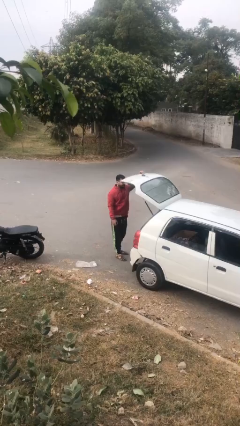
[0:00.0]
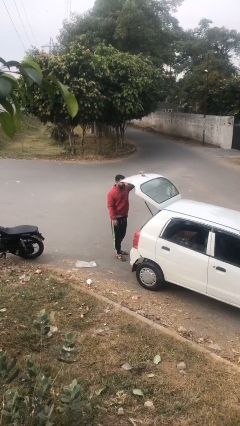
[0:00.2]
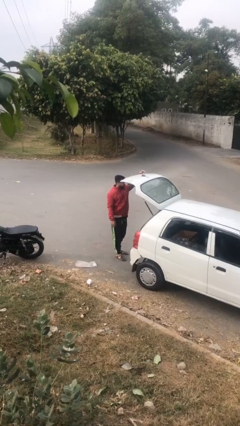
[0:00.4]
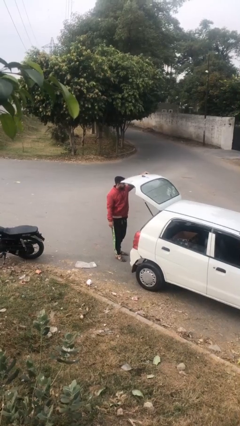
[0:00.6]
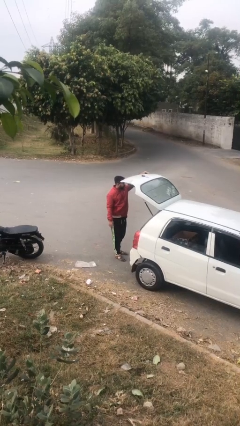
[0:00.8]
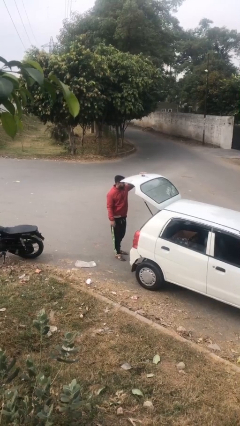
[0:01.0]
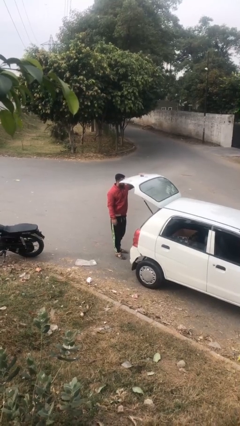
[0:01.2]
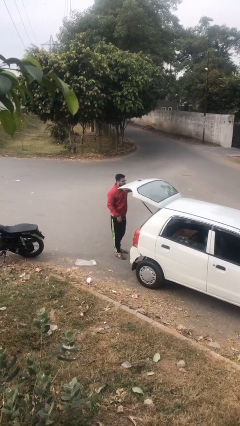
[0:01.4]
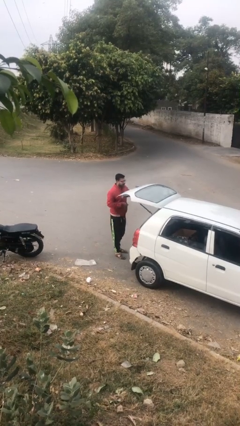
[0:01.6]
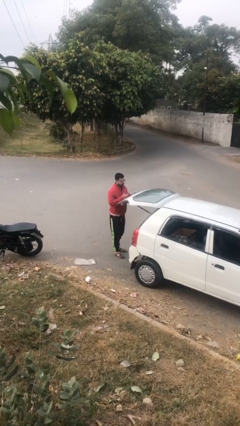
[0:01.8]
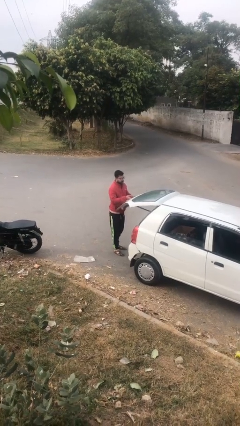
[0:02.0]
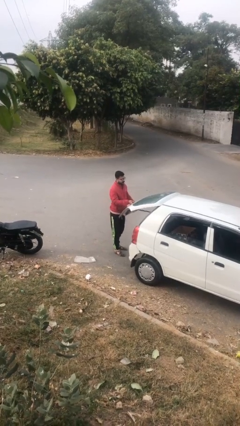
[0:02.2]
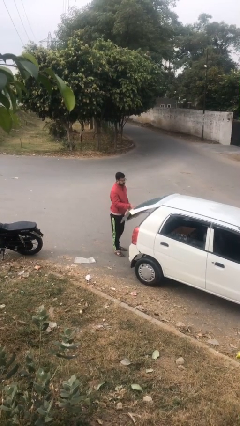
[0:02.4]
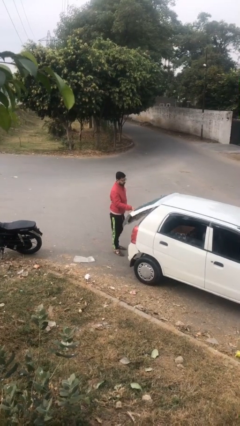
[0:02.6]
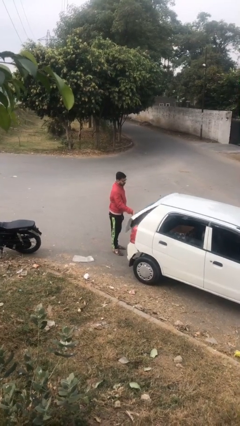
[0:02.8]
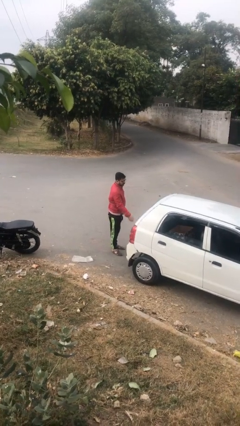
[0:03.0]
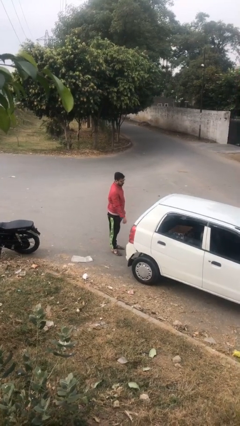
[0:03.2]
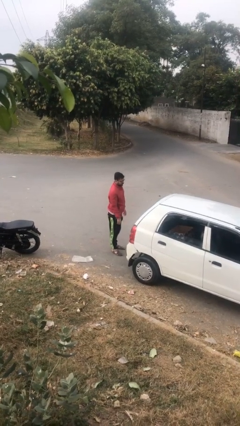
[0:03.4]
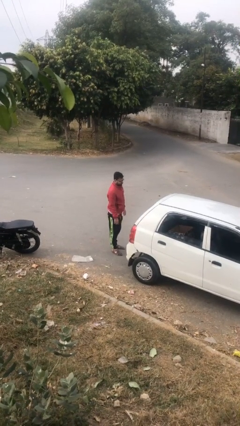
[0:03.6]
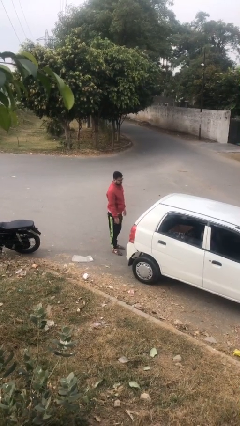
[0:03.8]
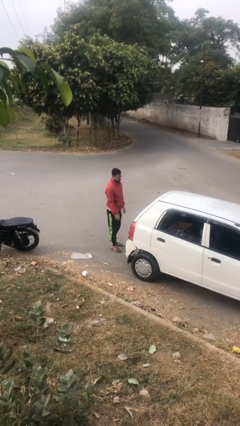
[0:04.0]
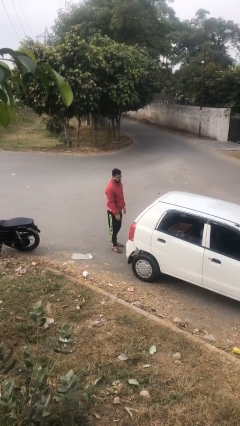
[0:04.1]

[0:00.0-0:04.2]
person closes car trunk

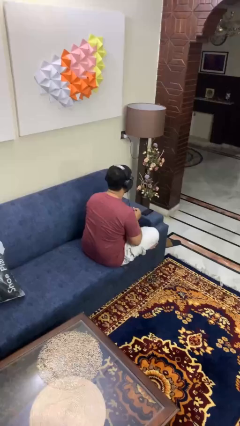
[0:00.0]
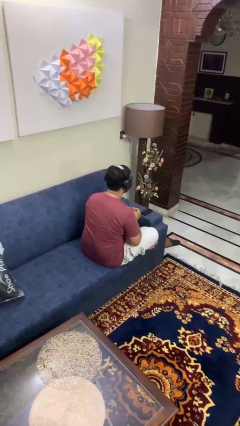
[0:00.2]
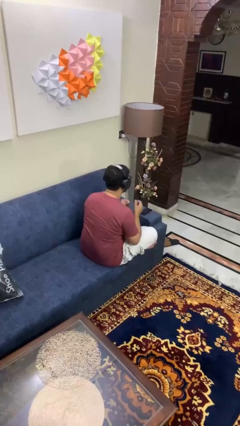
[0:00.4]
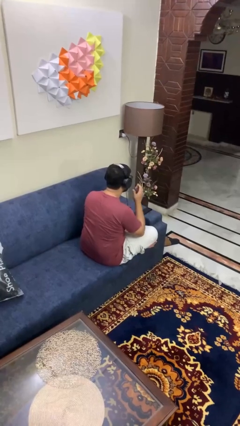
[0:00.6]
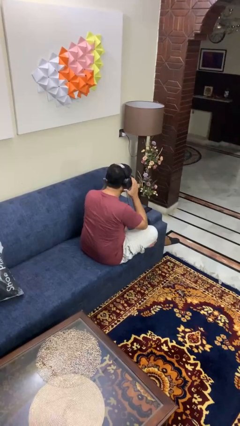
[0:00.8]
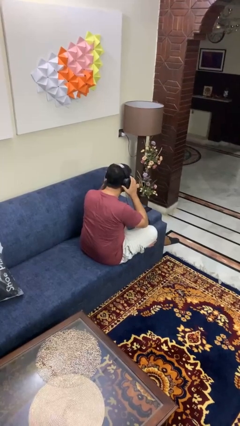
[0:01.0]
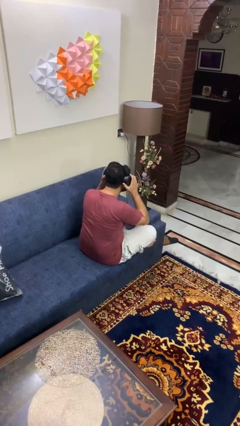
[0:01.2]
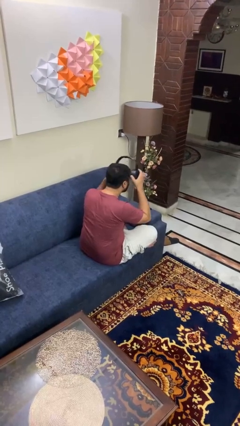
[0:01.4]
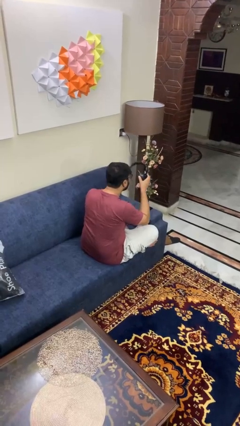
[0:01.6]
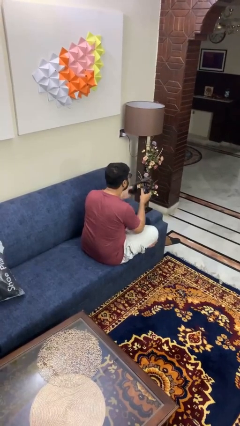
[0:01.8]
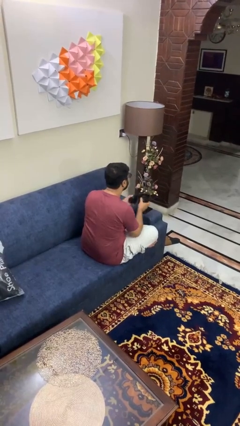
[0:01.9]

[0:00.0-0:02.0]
person takes off headphones

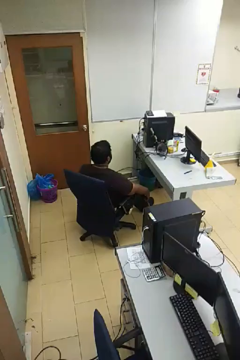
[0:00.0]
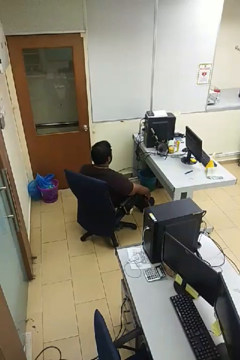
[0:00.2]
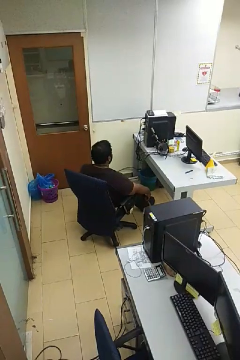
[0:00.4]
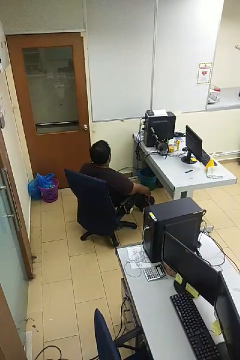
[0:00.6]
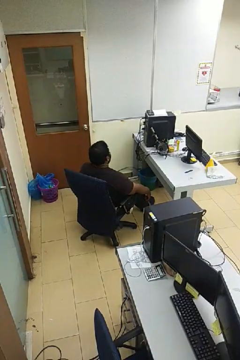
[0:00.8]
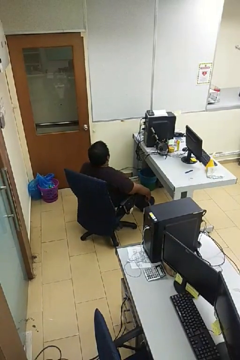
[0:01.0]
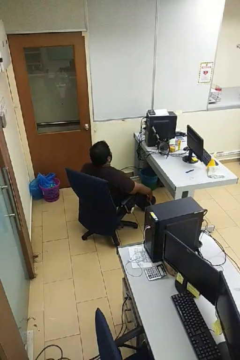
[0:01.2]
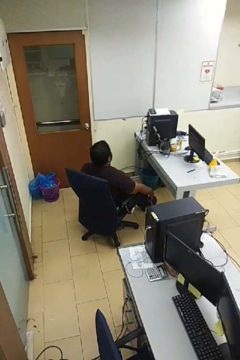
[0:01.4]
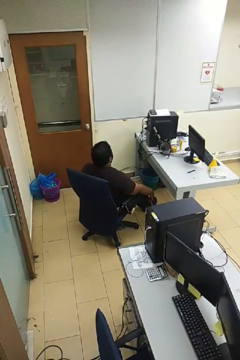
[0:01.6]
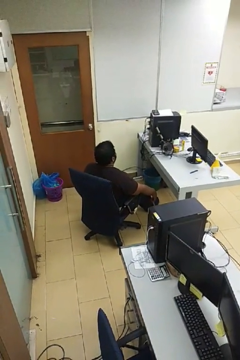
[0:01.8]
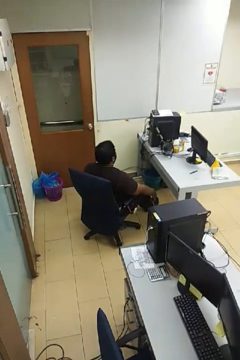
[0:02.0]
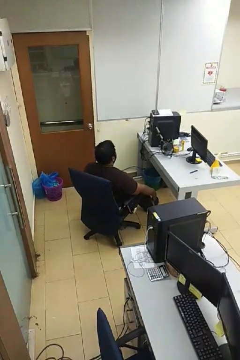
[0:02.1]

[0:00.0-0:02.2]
person shakes head

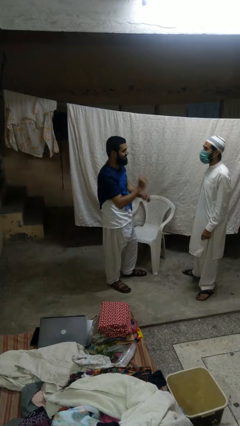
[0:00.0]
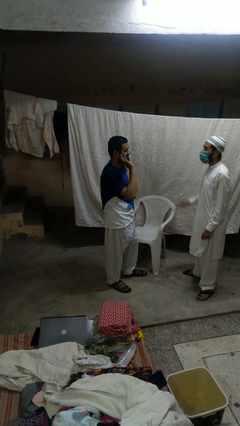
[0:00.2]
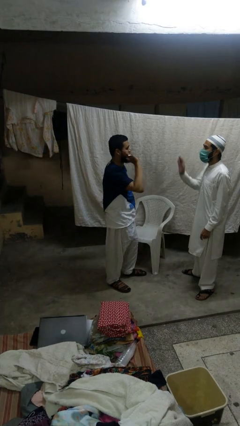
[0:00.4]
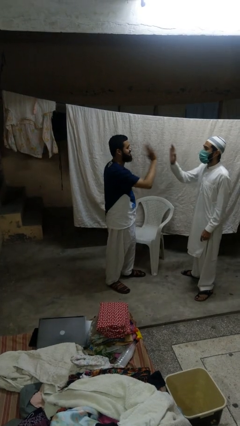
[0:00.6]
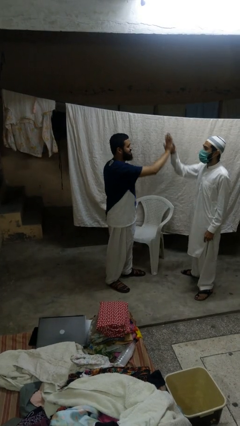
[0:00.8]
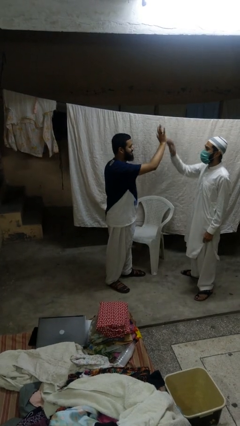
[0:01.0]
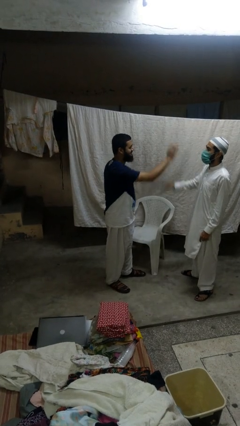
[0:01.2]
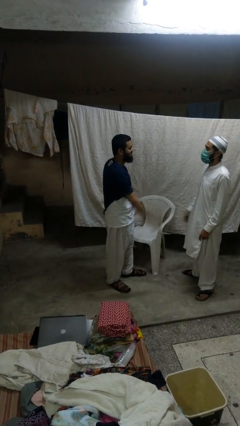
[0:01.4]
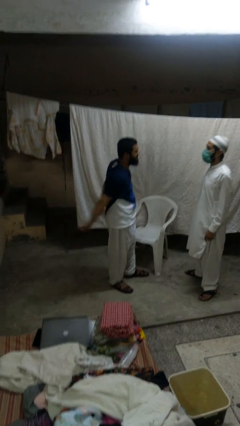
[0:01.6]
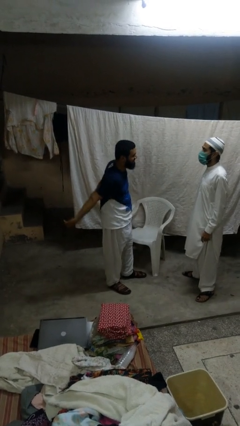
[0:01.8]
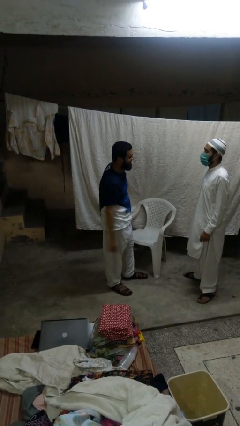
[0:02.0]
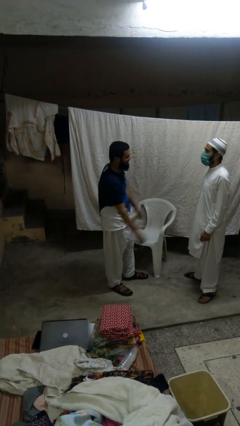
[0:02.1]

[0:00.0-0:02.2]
person highfives hand

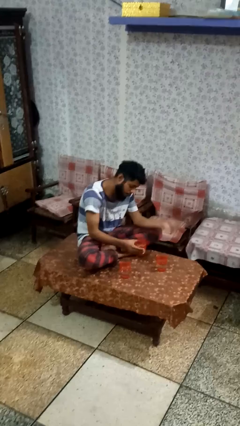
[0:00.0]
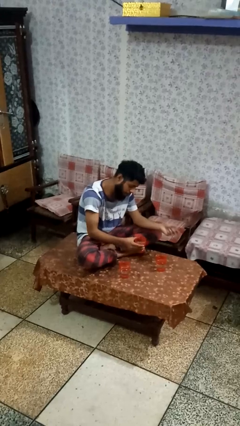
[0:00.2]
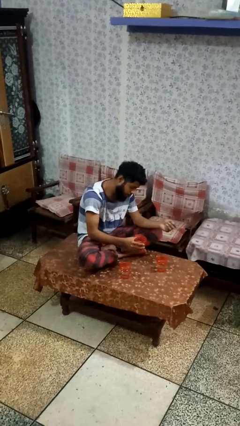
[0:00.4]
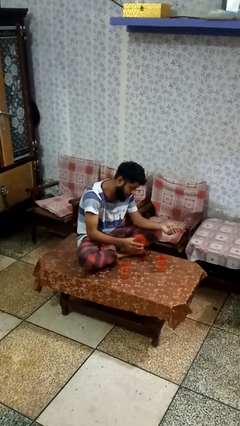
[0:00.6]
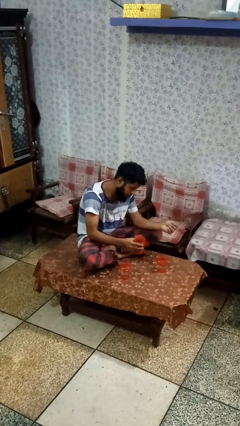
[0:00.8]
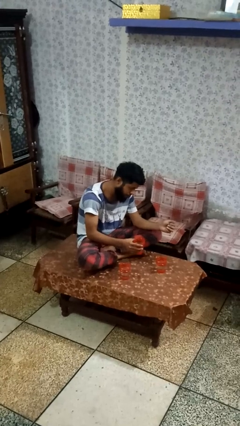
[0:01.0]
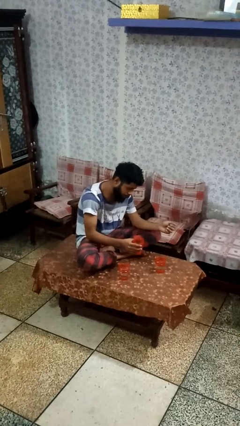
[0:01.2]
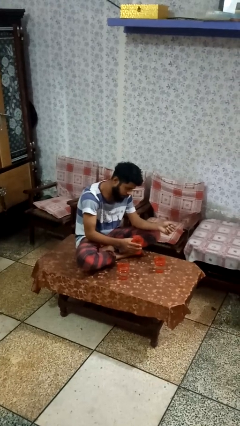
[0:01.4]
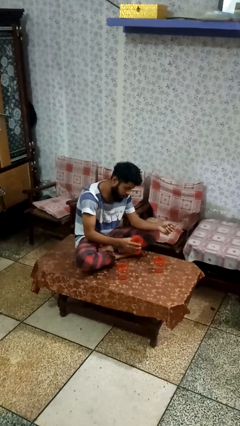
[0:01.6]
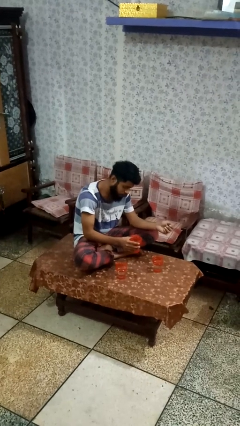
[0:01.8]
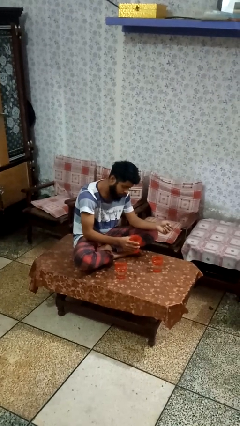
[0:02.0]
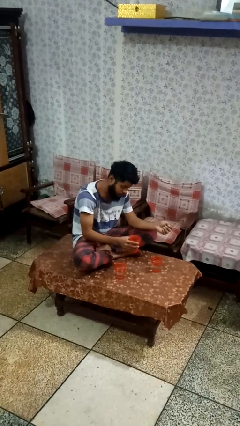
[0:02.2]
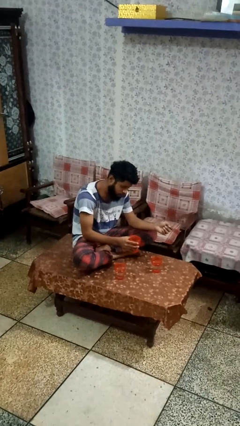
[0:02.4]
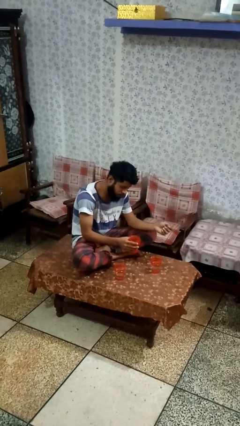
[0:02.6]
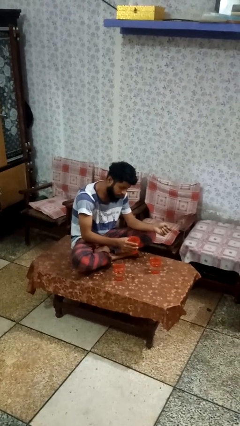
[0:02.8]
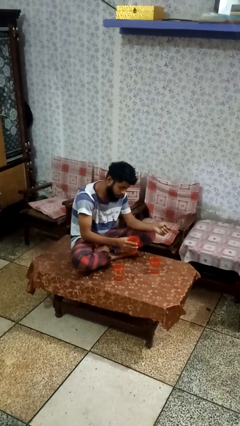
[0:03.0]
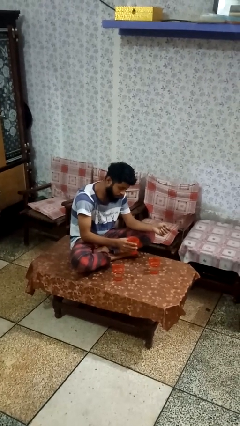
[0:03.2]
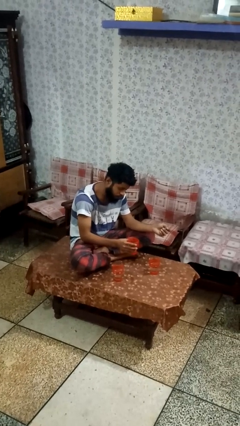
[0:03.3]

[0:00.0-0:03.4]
person picks up object from table

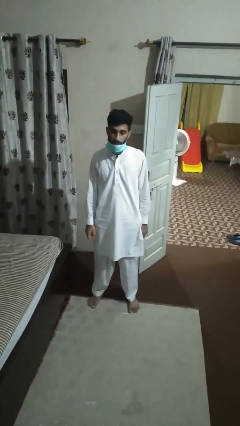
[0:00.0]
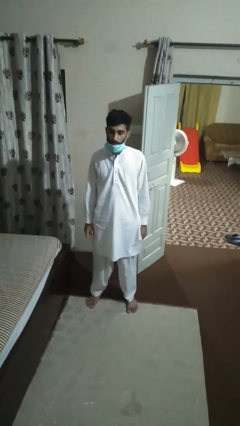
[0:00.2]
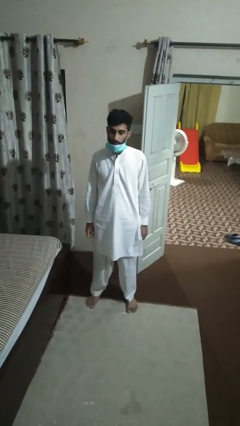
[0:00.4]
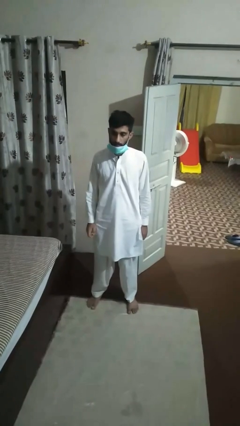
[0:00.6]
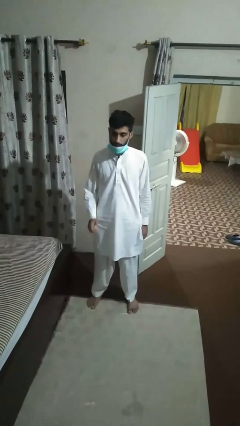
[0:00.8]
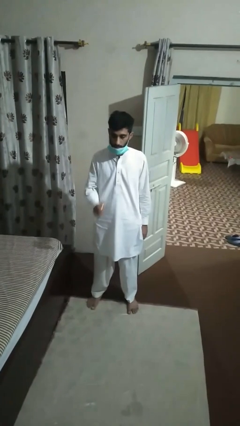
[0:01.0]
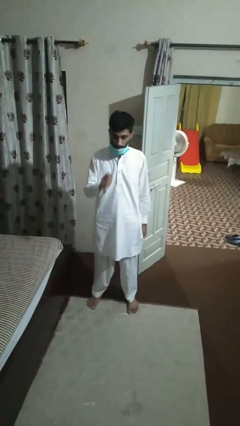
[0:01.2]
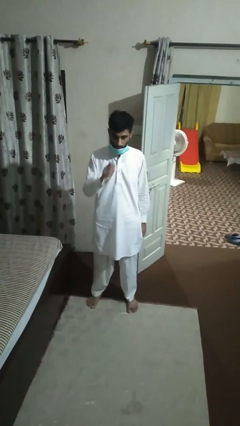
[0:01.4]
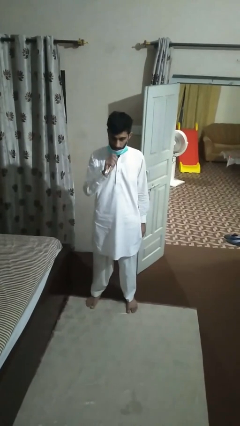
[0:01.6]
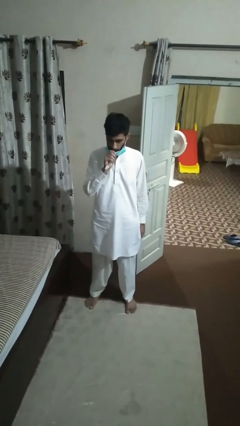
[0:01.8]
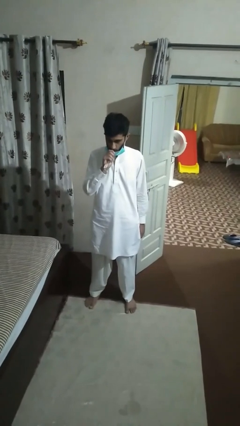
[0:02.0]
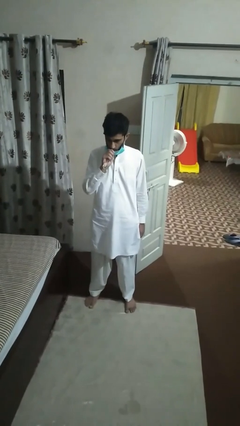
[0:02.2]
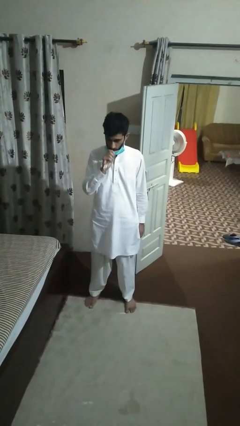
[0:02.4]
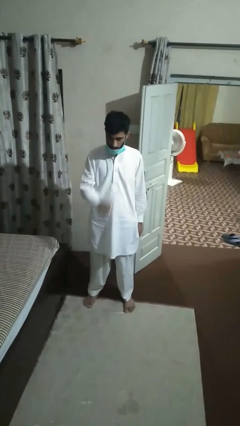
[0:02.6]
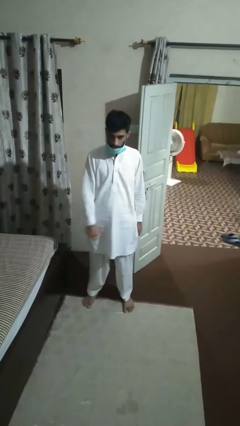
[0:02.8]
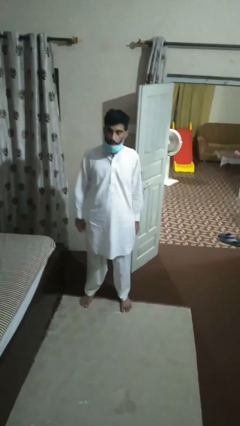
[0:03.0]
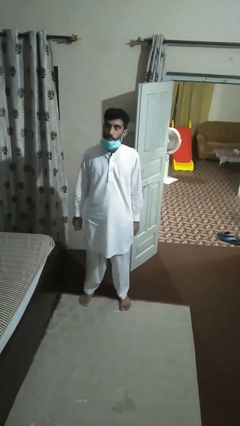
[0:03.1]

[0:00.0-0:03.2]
person vapes

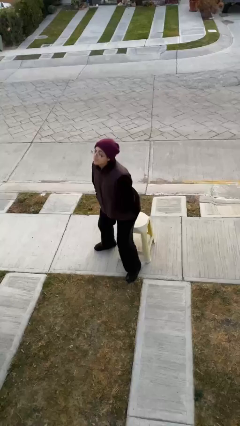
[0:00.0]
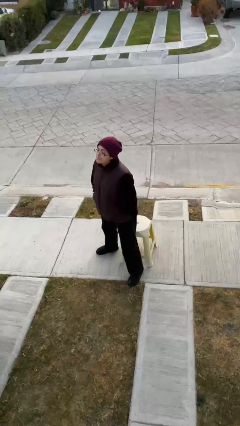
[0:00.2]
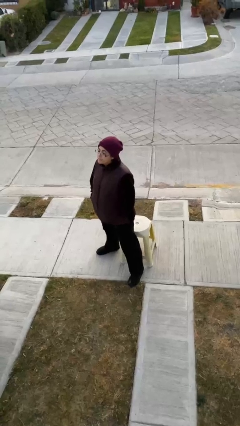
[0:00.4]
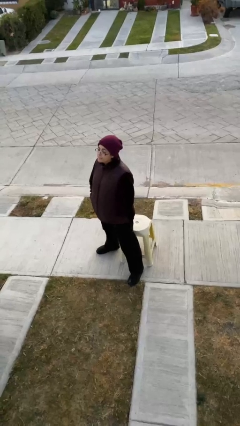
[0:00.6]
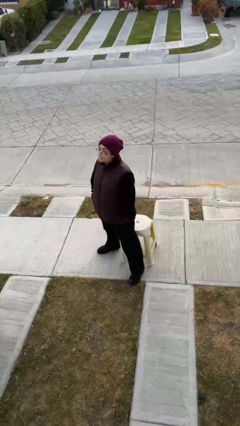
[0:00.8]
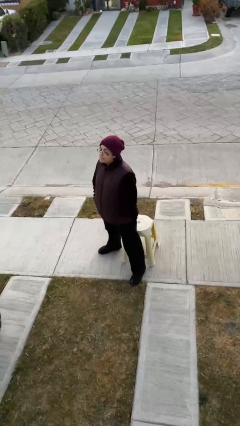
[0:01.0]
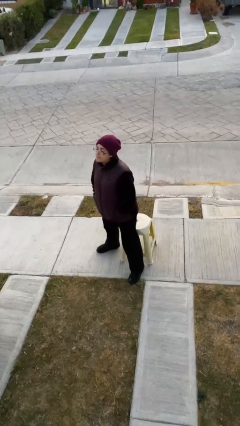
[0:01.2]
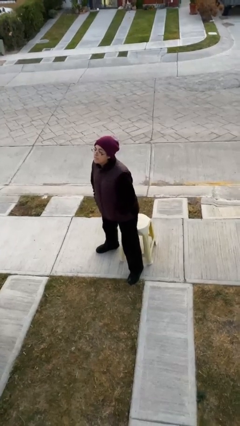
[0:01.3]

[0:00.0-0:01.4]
person stands up
